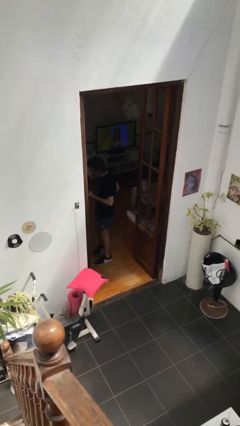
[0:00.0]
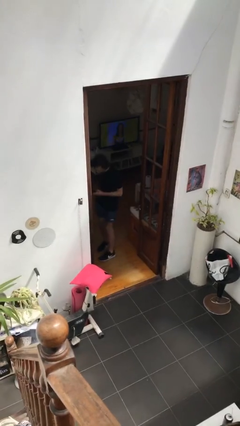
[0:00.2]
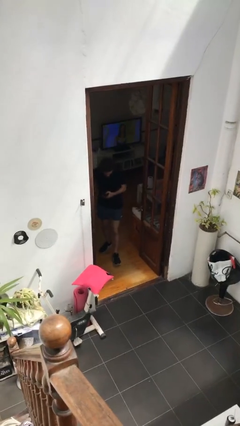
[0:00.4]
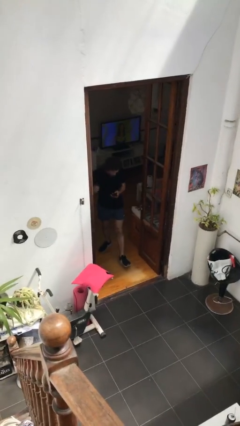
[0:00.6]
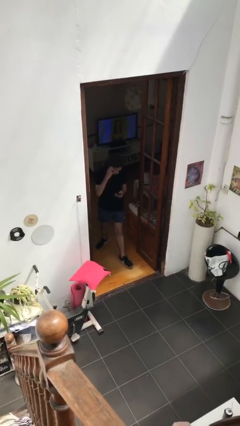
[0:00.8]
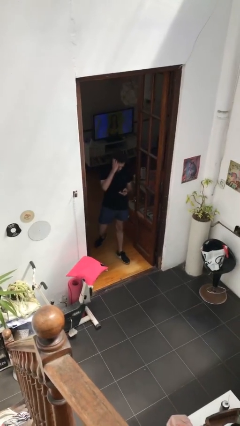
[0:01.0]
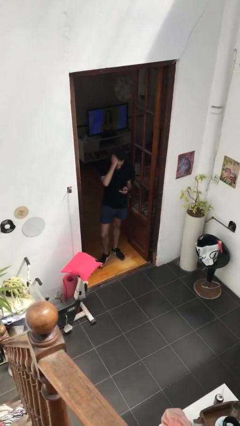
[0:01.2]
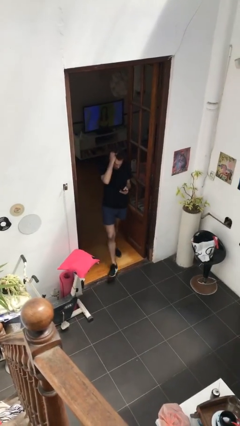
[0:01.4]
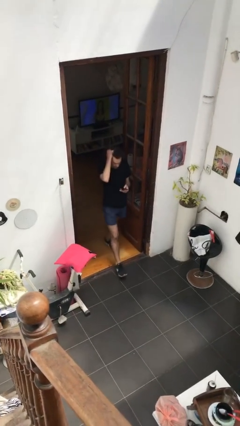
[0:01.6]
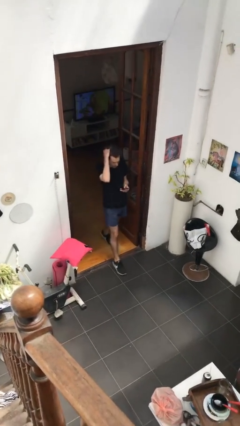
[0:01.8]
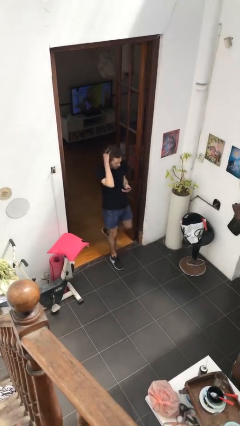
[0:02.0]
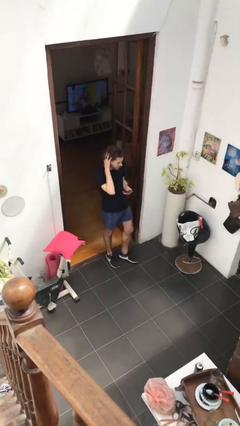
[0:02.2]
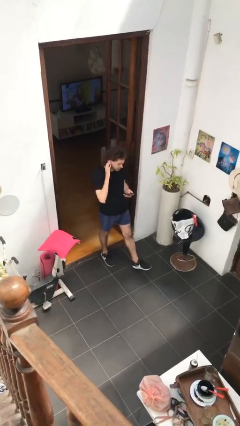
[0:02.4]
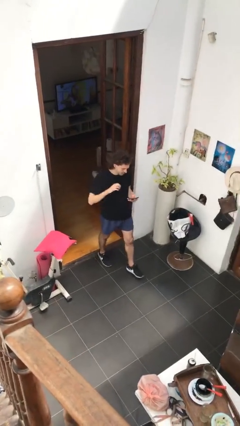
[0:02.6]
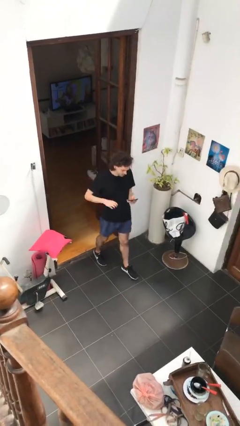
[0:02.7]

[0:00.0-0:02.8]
person enters scene through structure

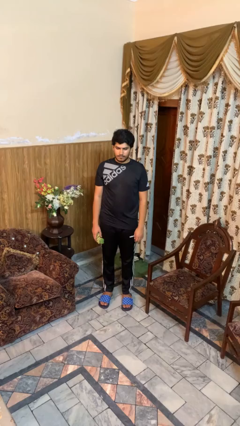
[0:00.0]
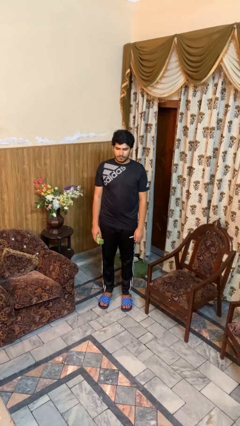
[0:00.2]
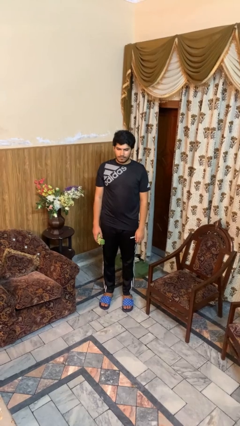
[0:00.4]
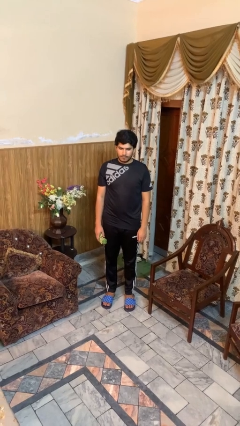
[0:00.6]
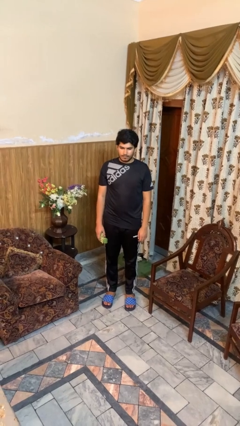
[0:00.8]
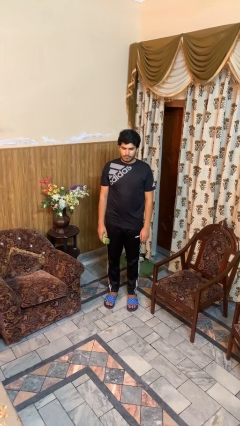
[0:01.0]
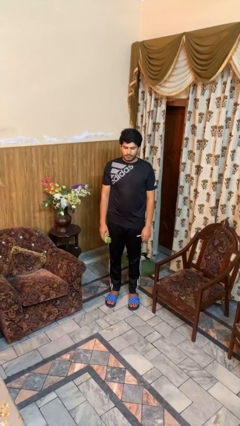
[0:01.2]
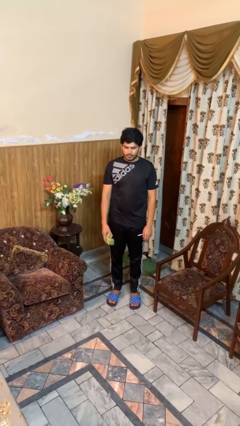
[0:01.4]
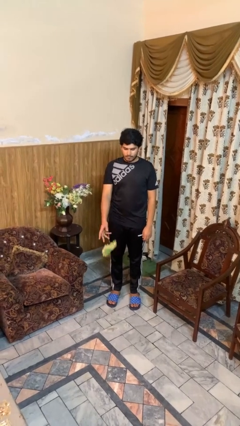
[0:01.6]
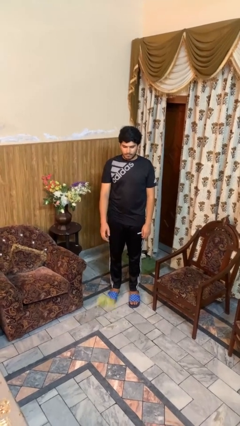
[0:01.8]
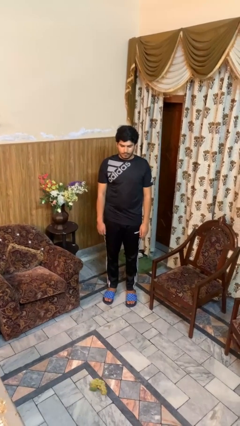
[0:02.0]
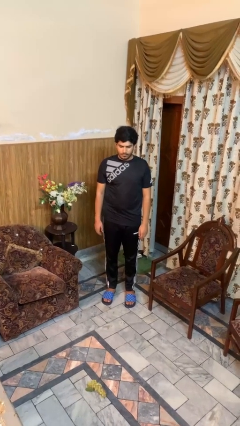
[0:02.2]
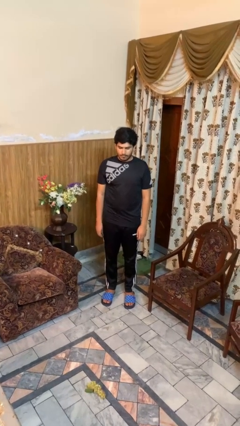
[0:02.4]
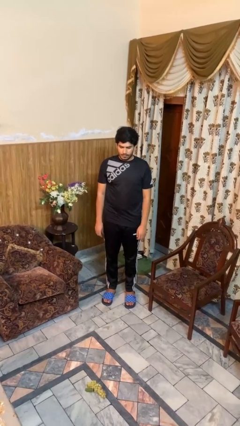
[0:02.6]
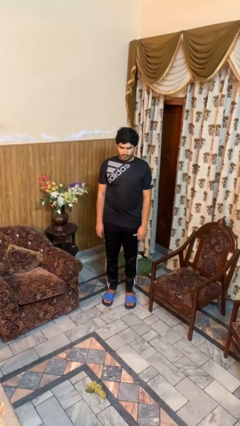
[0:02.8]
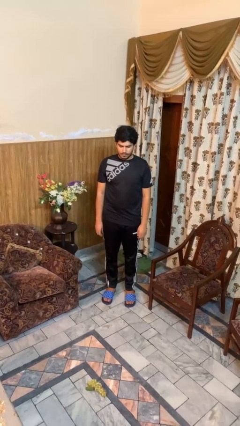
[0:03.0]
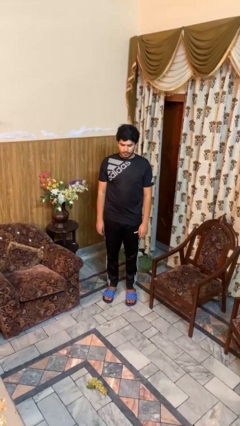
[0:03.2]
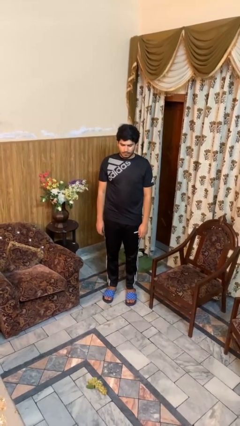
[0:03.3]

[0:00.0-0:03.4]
person throws object to ground

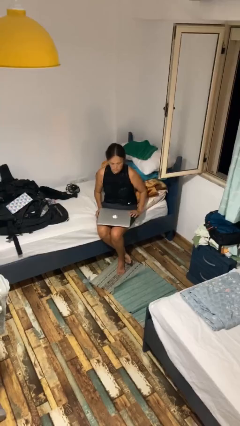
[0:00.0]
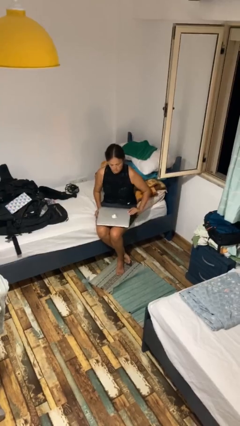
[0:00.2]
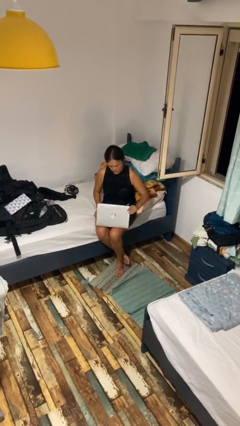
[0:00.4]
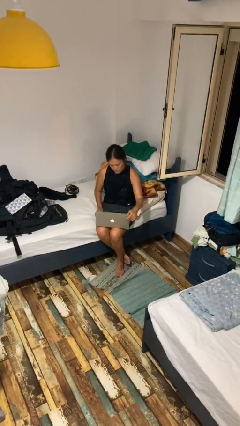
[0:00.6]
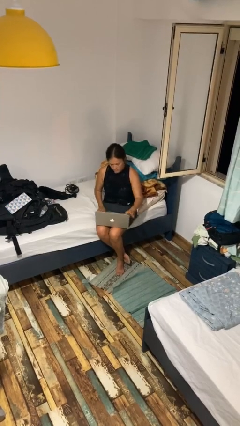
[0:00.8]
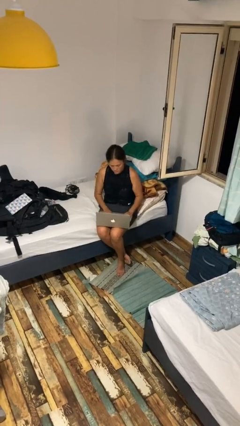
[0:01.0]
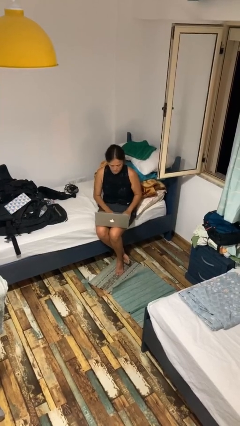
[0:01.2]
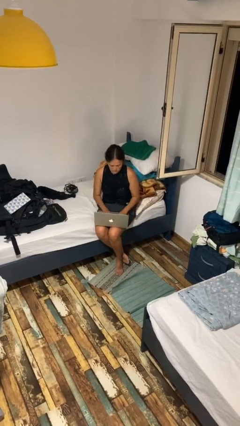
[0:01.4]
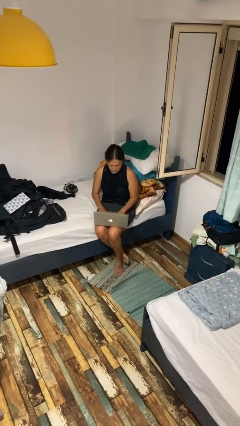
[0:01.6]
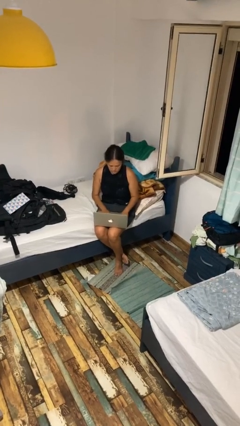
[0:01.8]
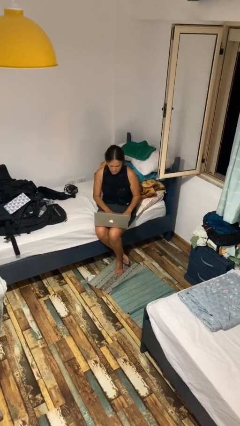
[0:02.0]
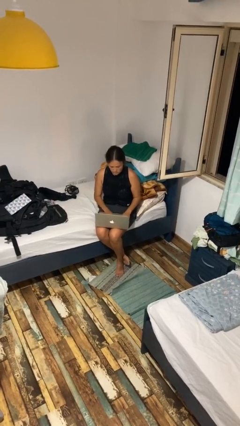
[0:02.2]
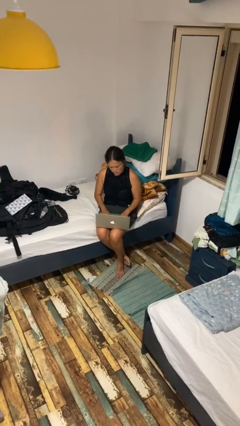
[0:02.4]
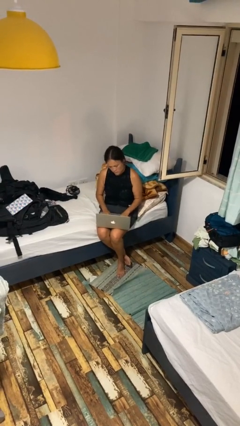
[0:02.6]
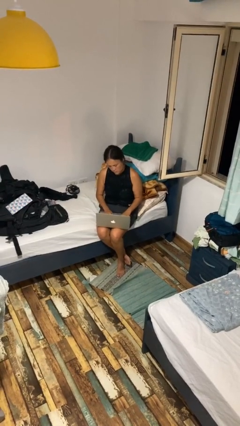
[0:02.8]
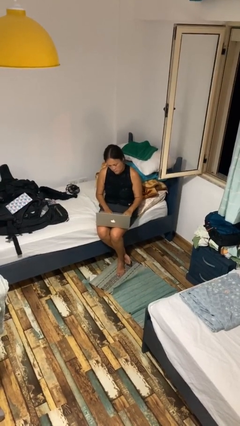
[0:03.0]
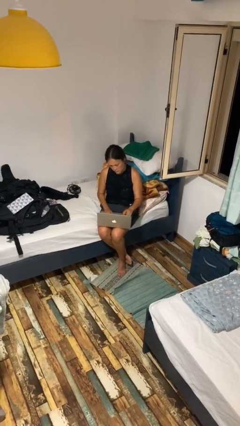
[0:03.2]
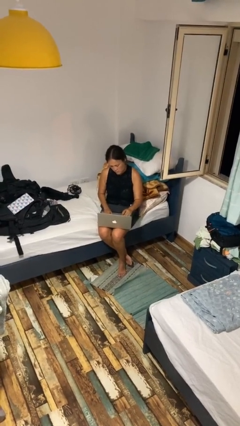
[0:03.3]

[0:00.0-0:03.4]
person opens laptop

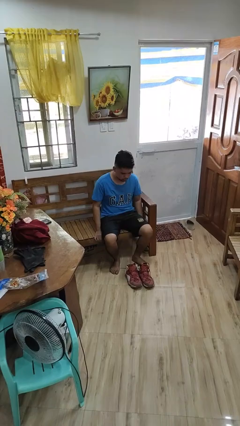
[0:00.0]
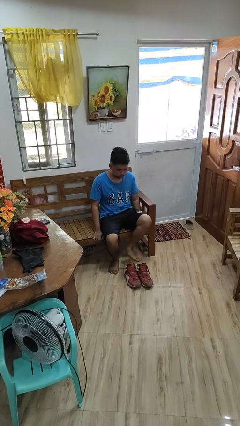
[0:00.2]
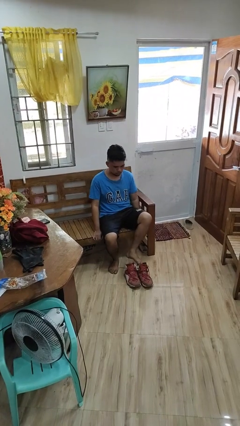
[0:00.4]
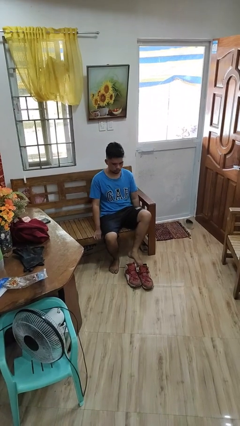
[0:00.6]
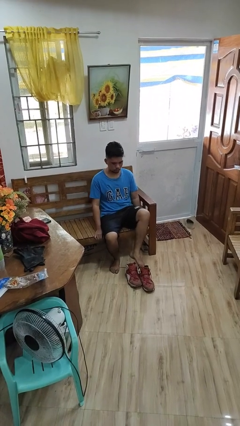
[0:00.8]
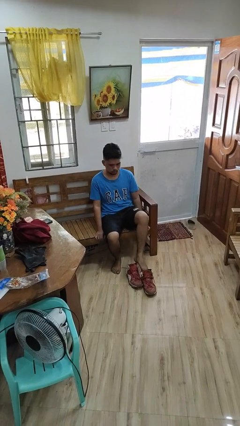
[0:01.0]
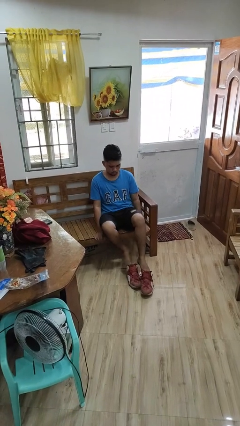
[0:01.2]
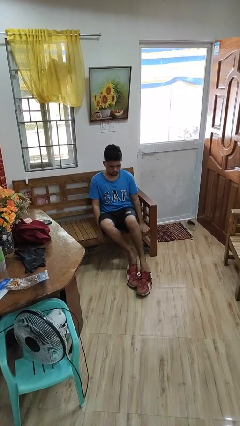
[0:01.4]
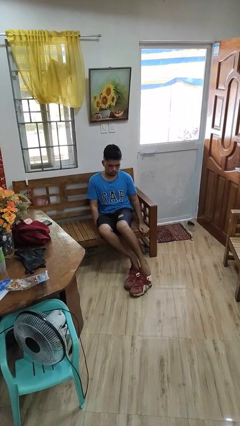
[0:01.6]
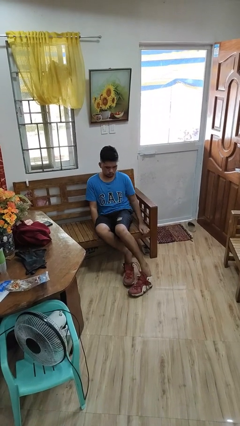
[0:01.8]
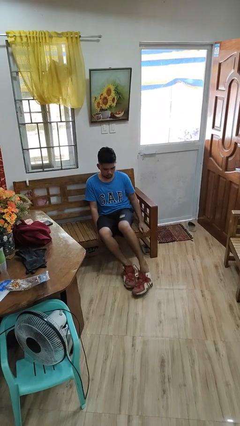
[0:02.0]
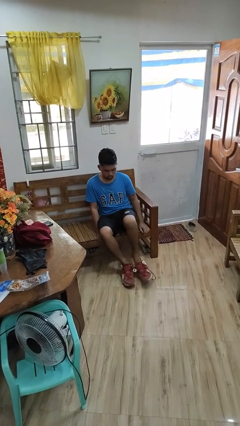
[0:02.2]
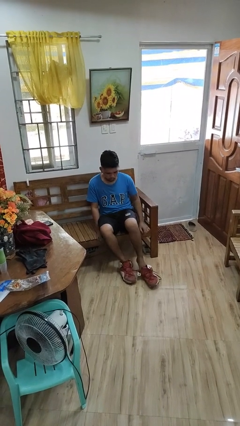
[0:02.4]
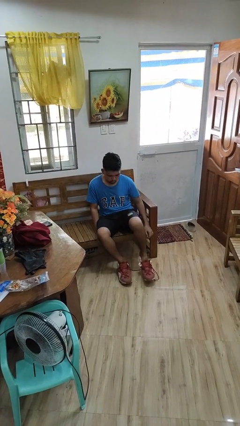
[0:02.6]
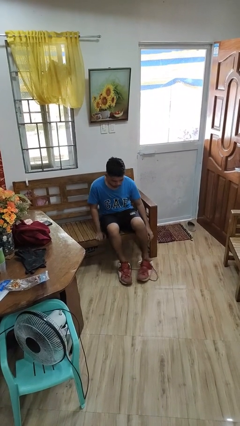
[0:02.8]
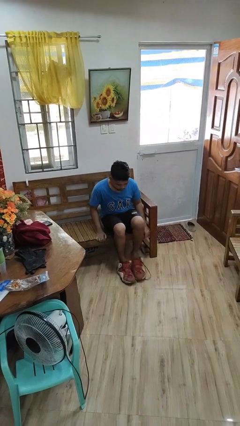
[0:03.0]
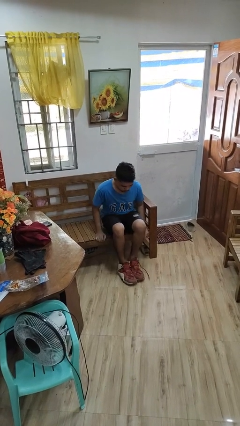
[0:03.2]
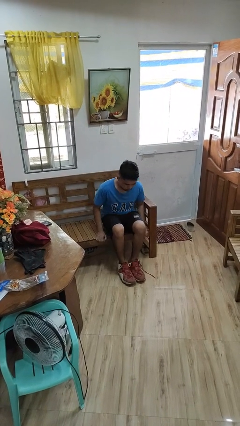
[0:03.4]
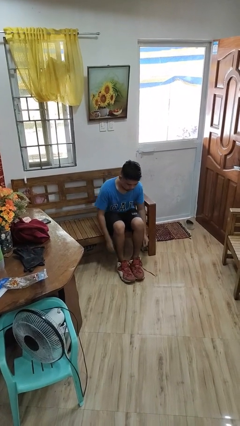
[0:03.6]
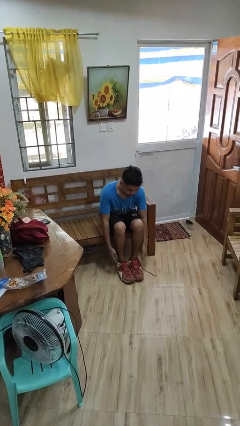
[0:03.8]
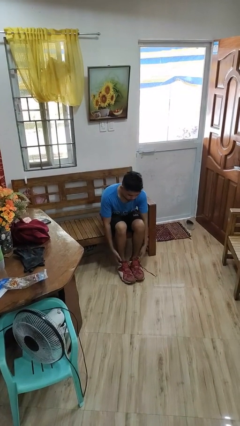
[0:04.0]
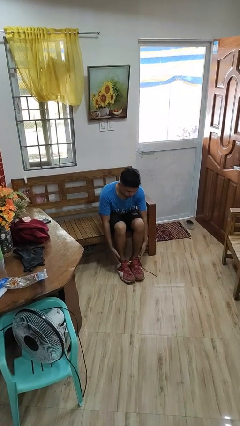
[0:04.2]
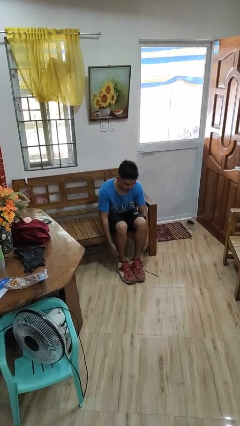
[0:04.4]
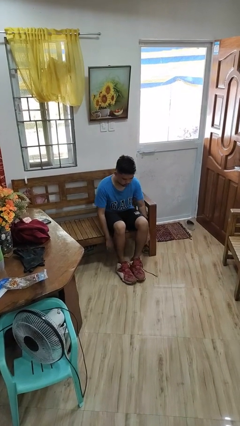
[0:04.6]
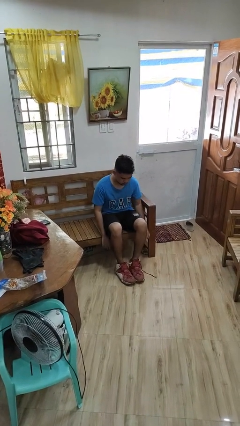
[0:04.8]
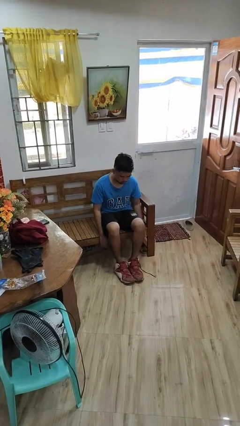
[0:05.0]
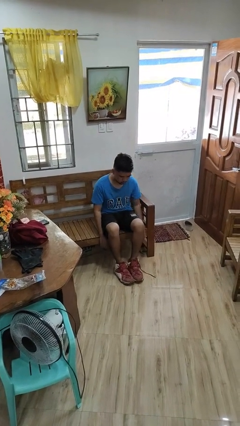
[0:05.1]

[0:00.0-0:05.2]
person puts on shoes

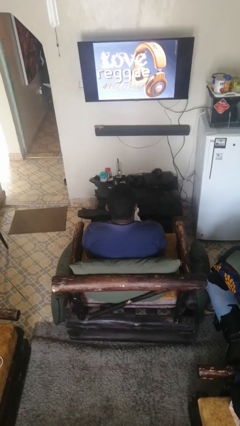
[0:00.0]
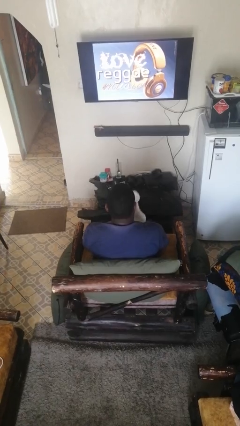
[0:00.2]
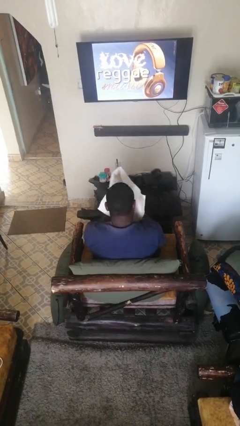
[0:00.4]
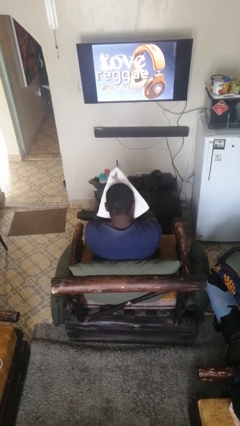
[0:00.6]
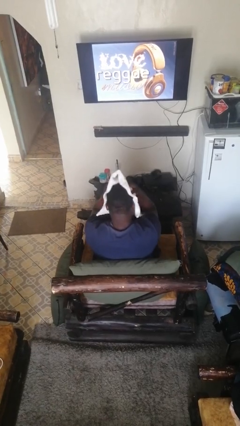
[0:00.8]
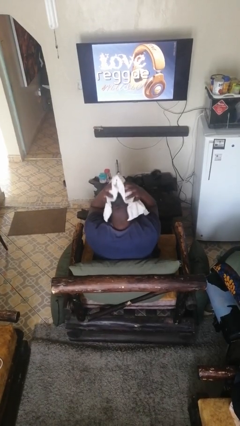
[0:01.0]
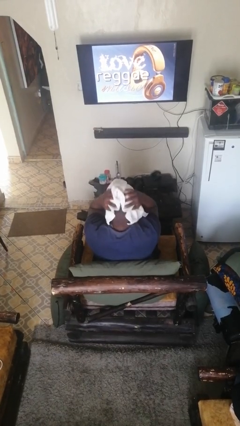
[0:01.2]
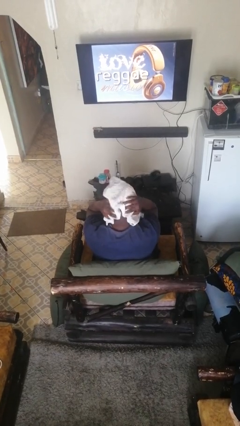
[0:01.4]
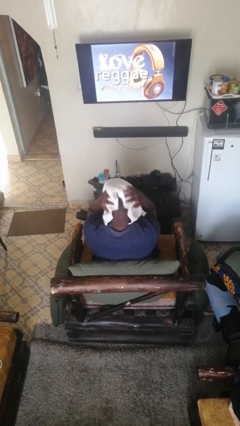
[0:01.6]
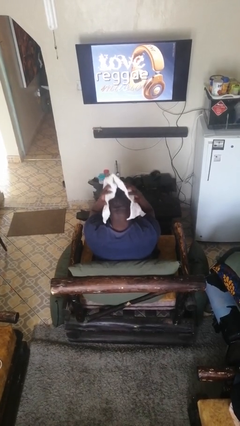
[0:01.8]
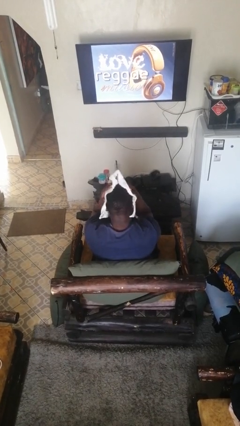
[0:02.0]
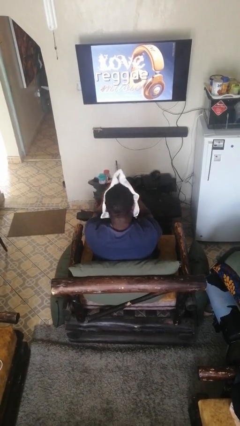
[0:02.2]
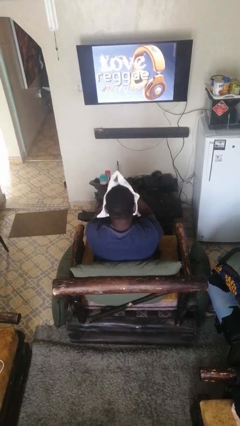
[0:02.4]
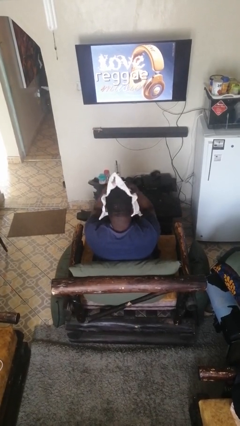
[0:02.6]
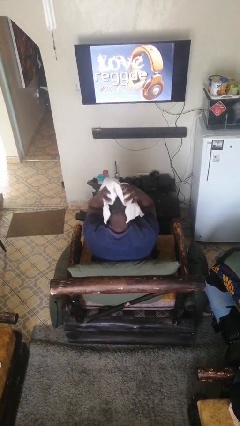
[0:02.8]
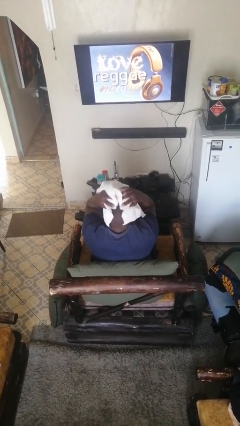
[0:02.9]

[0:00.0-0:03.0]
person dries hair with towel
